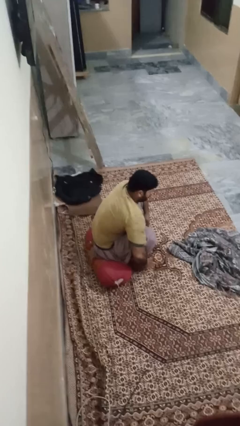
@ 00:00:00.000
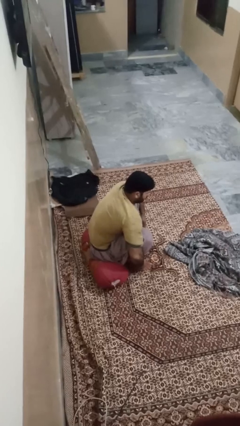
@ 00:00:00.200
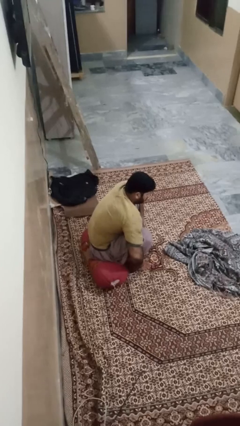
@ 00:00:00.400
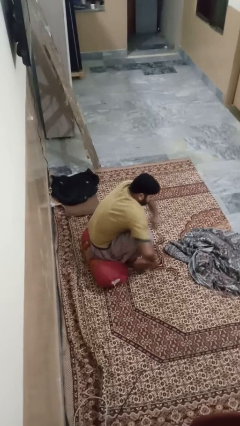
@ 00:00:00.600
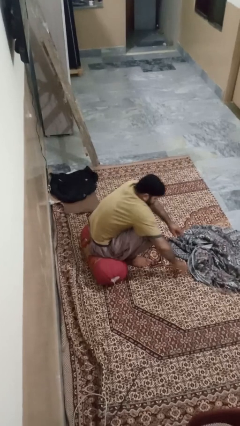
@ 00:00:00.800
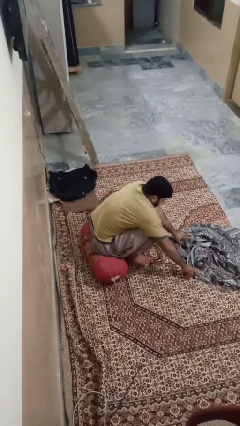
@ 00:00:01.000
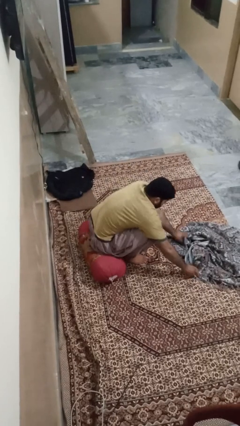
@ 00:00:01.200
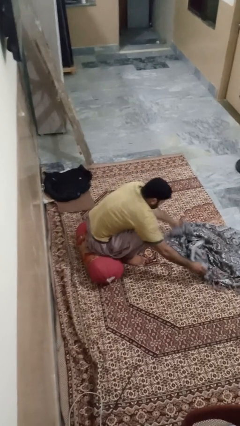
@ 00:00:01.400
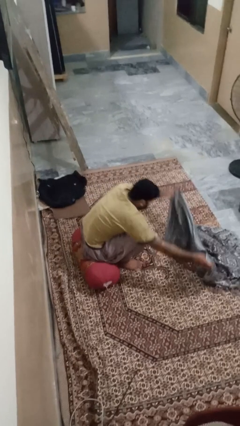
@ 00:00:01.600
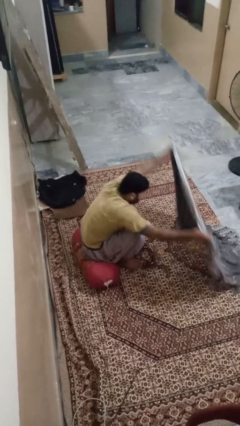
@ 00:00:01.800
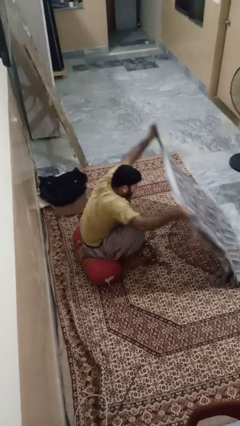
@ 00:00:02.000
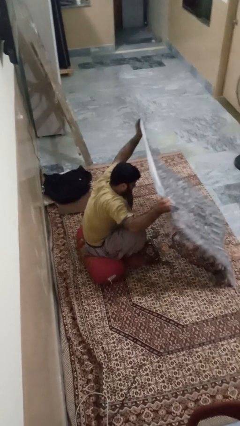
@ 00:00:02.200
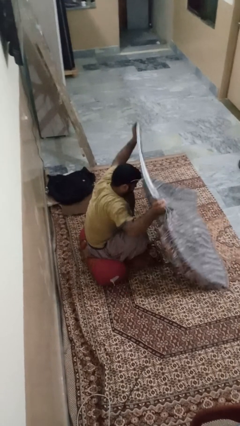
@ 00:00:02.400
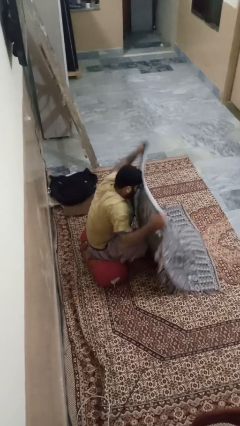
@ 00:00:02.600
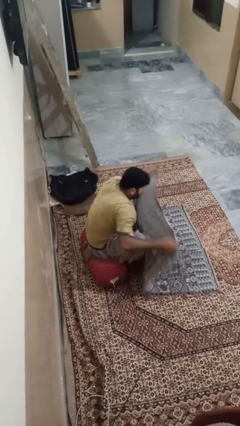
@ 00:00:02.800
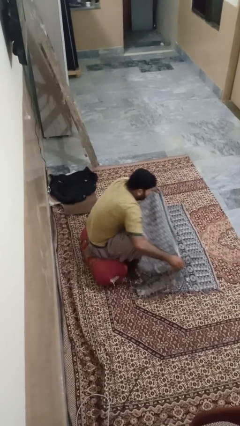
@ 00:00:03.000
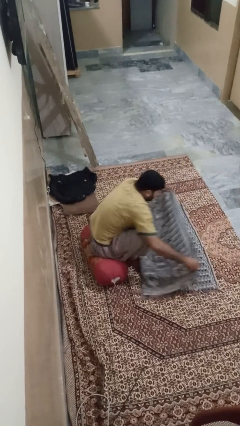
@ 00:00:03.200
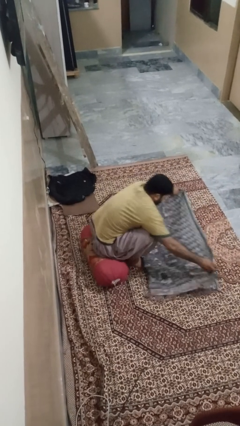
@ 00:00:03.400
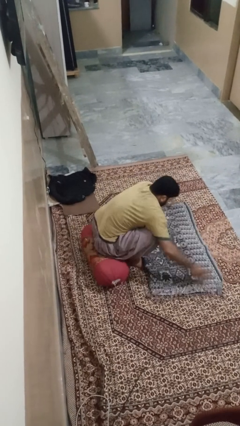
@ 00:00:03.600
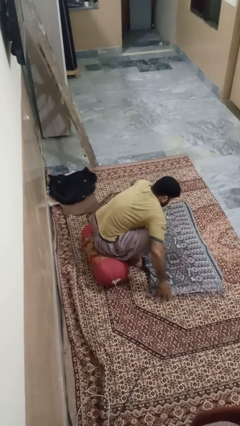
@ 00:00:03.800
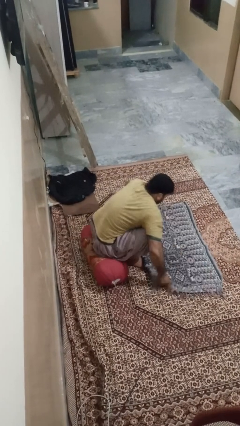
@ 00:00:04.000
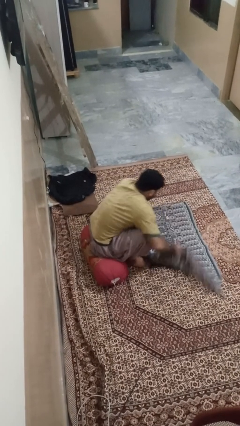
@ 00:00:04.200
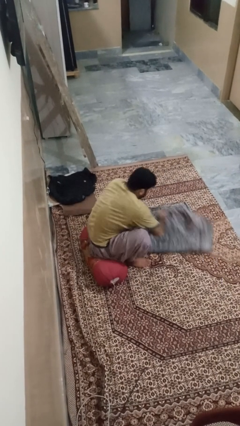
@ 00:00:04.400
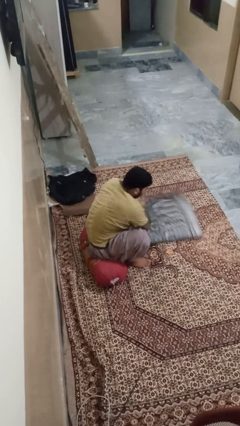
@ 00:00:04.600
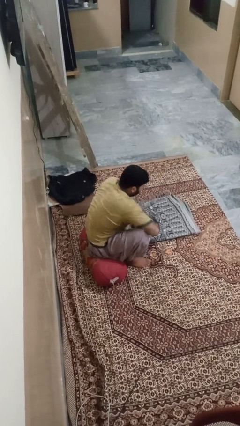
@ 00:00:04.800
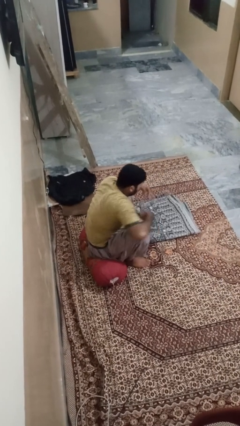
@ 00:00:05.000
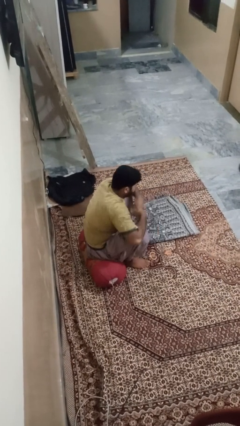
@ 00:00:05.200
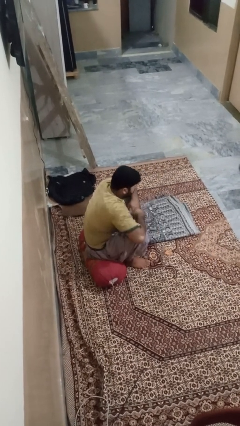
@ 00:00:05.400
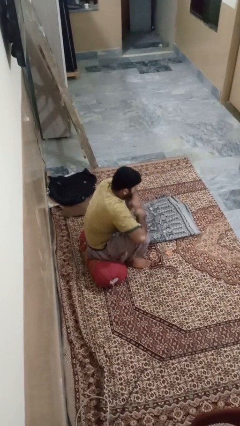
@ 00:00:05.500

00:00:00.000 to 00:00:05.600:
person folds blanket

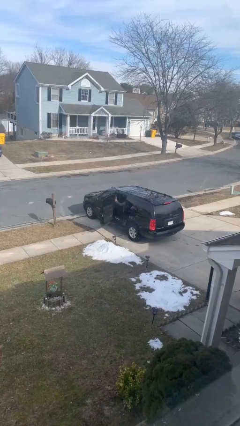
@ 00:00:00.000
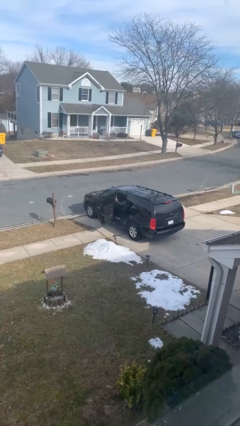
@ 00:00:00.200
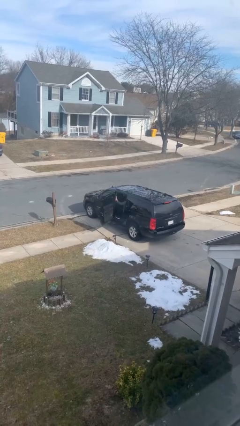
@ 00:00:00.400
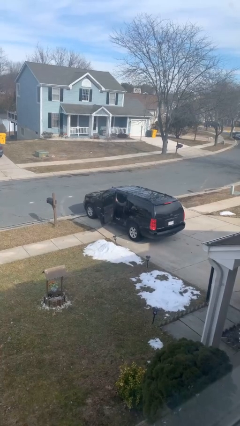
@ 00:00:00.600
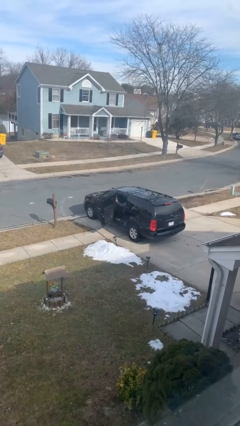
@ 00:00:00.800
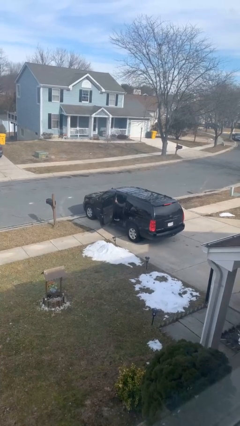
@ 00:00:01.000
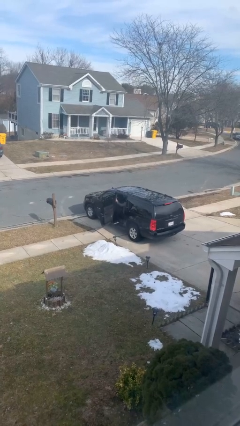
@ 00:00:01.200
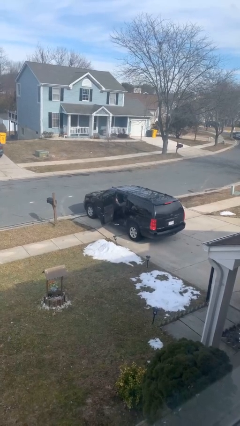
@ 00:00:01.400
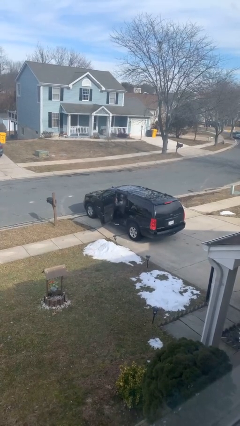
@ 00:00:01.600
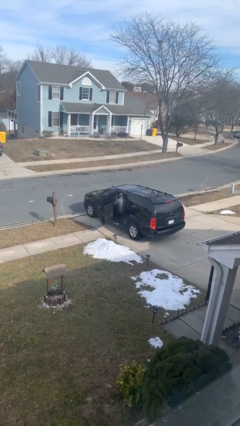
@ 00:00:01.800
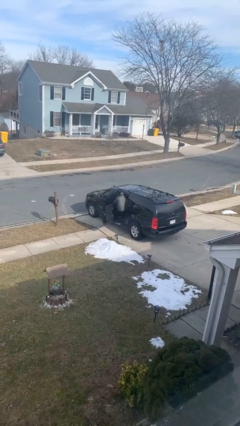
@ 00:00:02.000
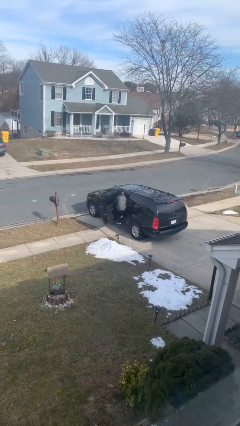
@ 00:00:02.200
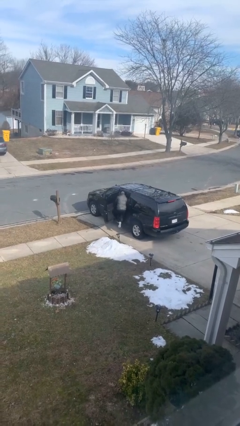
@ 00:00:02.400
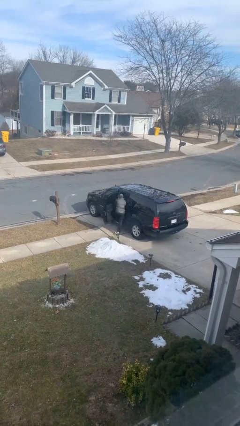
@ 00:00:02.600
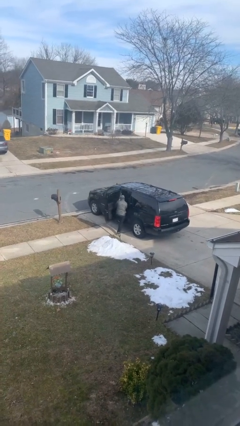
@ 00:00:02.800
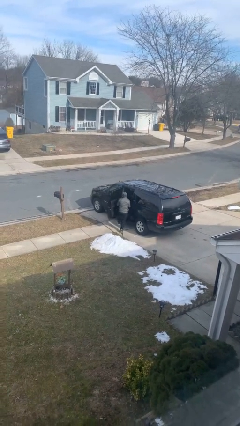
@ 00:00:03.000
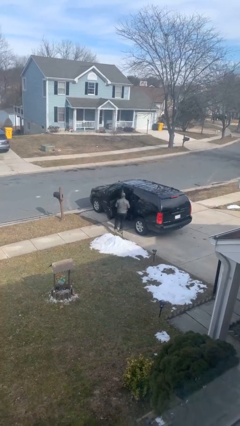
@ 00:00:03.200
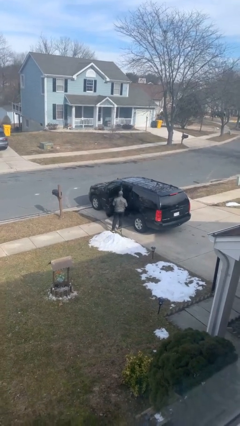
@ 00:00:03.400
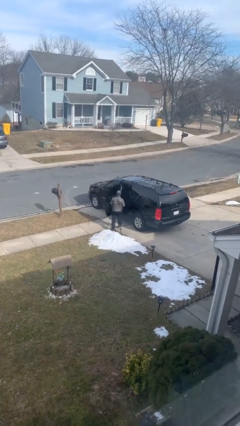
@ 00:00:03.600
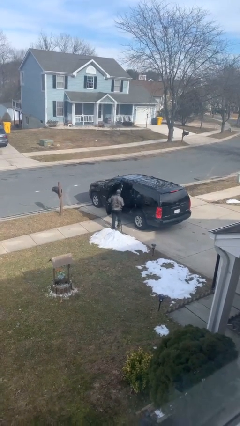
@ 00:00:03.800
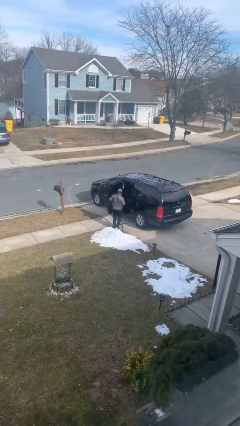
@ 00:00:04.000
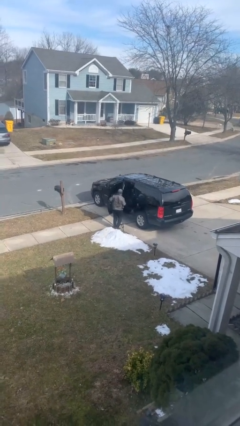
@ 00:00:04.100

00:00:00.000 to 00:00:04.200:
person exits car

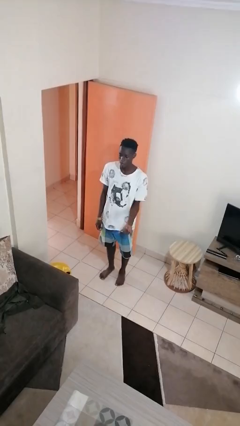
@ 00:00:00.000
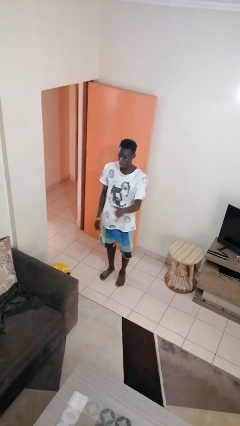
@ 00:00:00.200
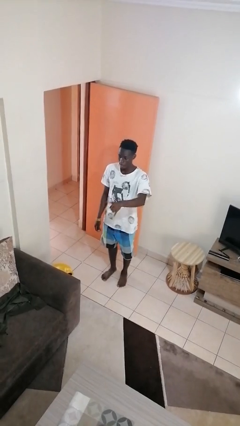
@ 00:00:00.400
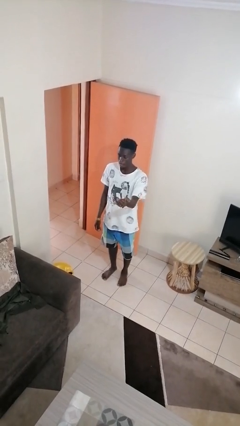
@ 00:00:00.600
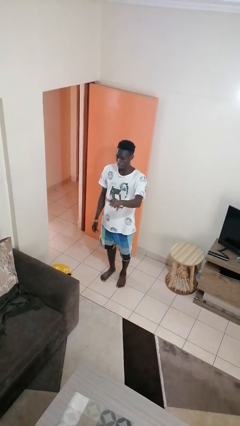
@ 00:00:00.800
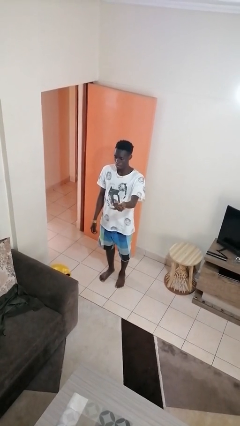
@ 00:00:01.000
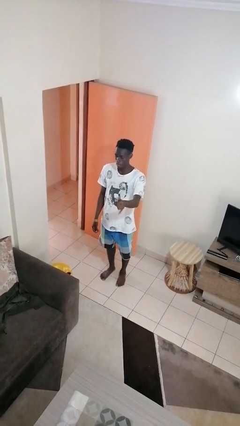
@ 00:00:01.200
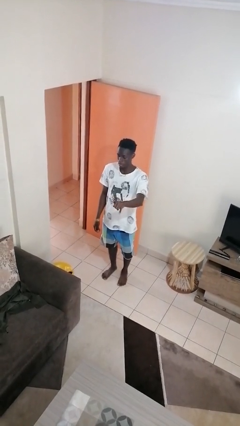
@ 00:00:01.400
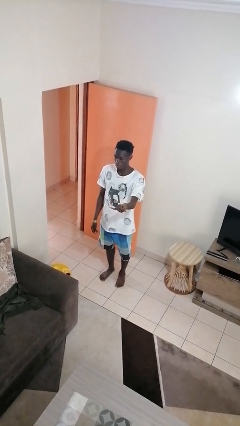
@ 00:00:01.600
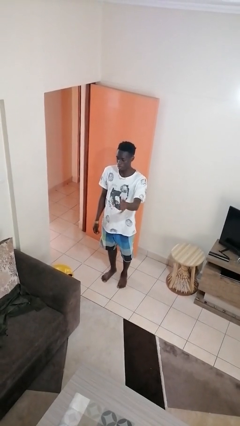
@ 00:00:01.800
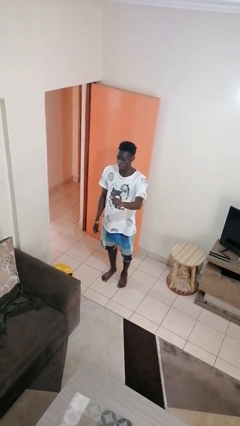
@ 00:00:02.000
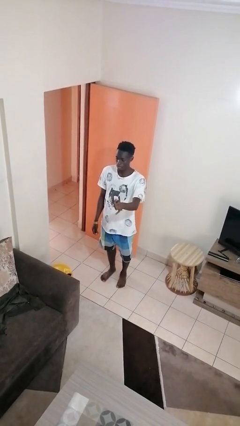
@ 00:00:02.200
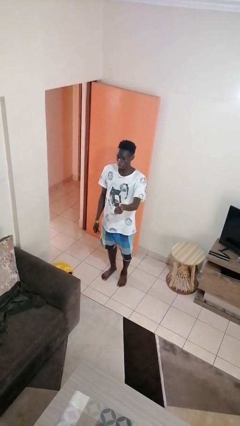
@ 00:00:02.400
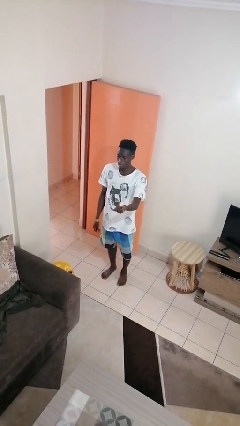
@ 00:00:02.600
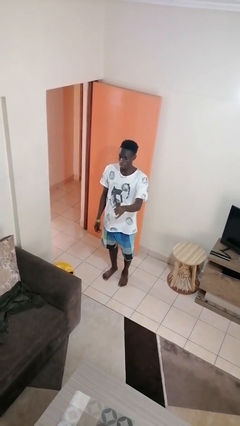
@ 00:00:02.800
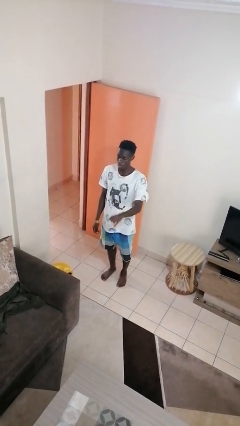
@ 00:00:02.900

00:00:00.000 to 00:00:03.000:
person gestures hang loose

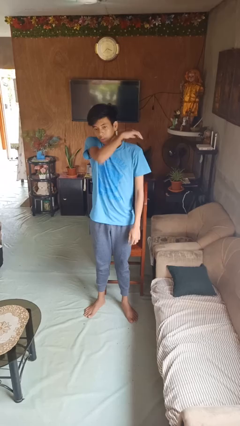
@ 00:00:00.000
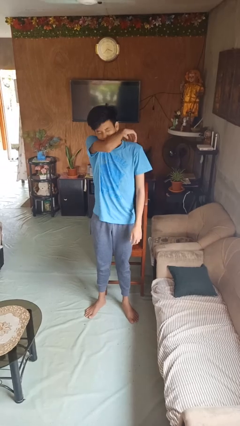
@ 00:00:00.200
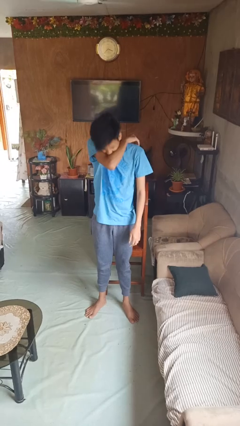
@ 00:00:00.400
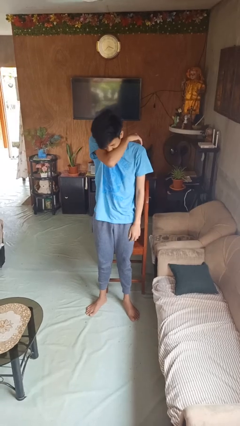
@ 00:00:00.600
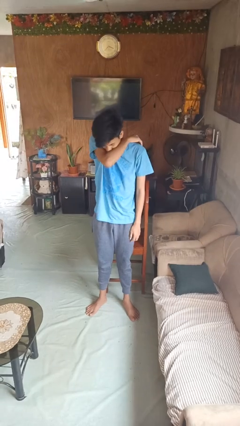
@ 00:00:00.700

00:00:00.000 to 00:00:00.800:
person sneezes into arm

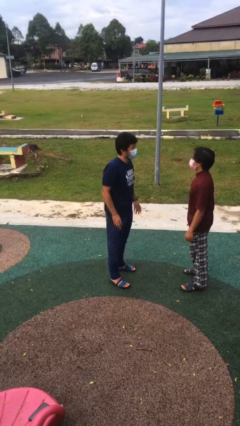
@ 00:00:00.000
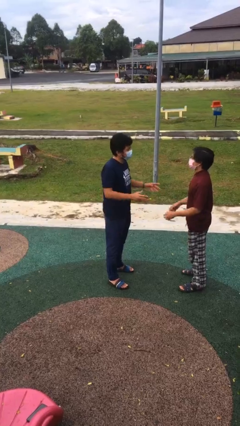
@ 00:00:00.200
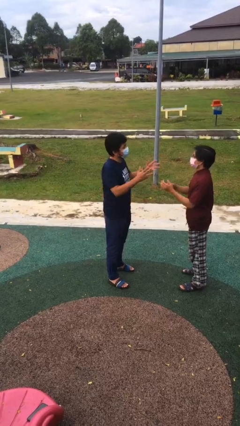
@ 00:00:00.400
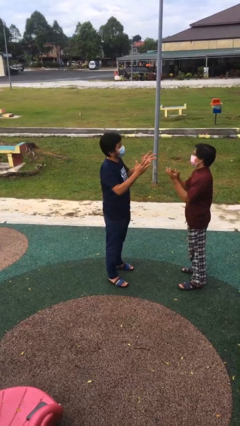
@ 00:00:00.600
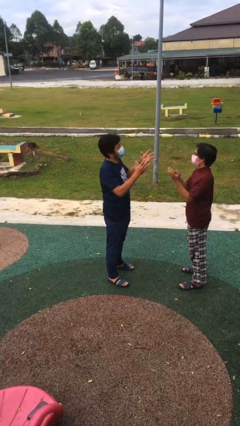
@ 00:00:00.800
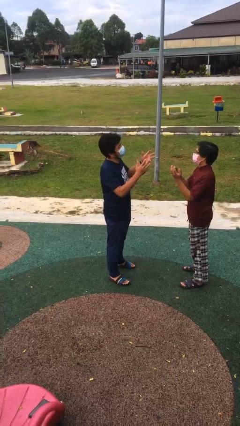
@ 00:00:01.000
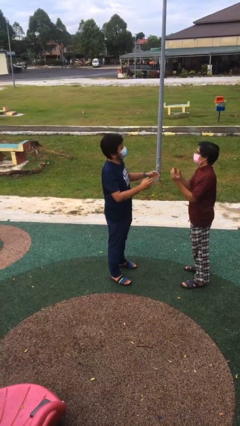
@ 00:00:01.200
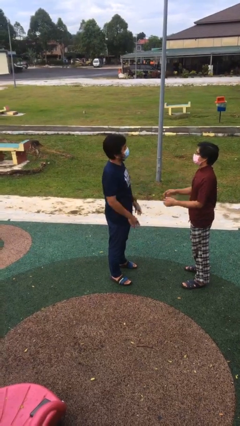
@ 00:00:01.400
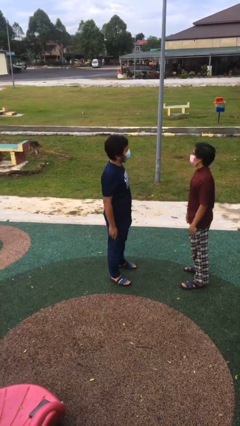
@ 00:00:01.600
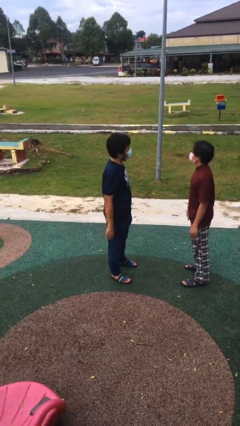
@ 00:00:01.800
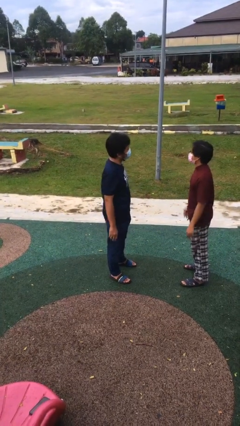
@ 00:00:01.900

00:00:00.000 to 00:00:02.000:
person talks to person

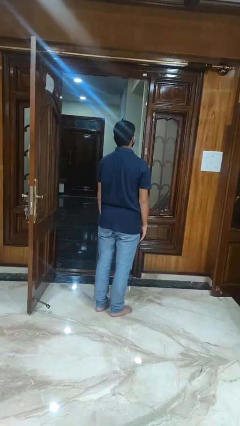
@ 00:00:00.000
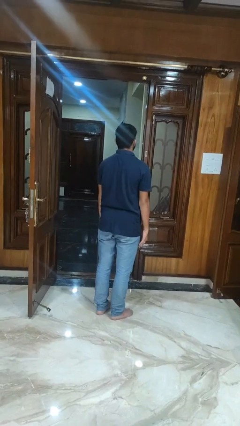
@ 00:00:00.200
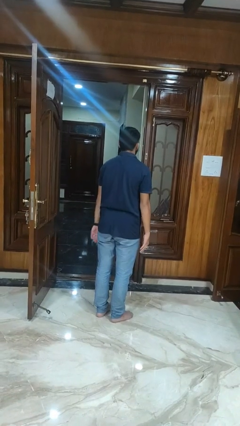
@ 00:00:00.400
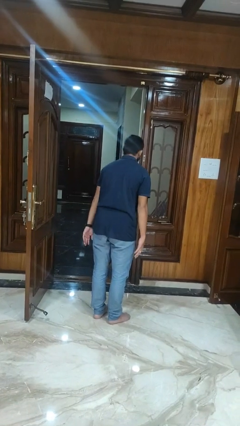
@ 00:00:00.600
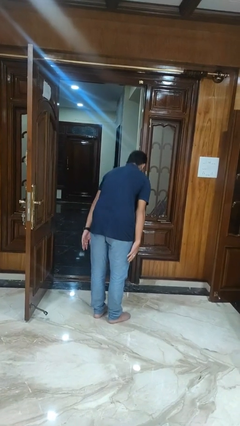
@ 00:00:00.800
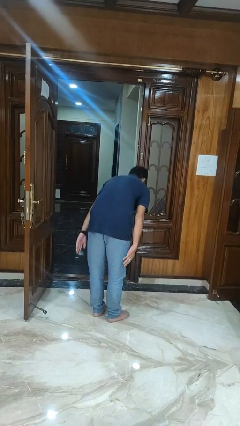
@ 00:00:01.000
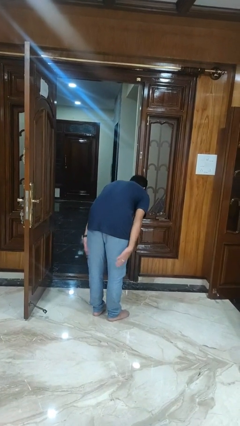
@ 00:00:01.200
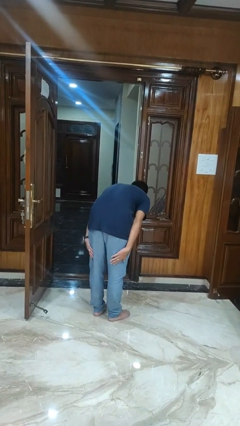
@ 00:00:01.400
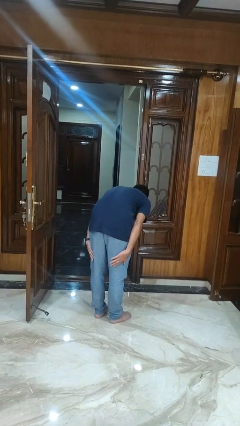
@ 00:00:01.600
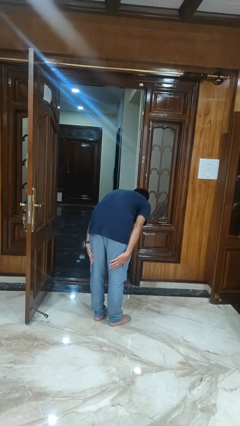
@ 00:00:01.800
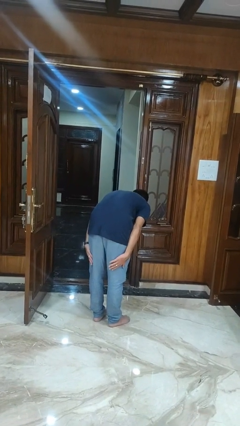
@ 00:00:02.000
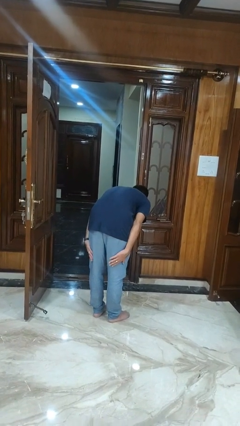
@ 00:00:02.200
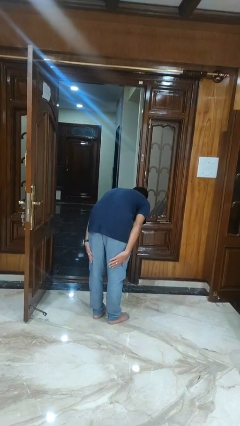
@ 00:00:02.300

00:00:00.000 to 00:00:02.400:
person bows
